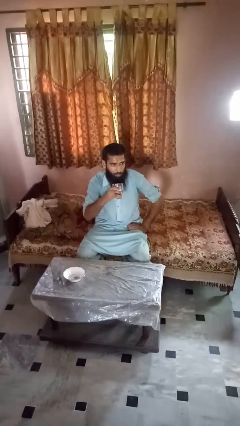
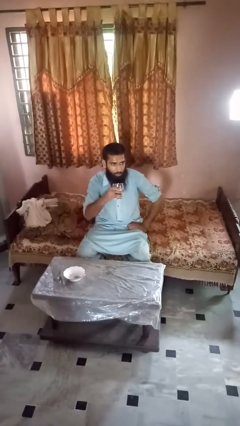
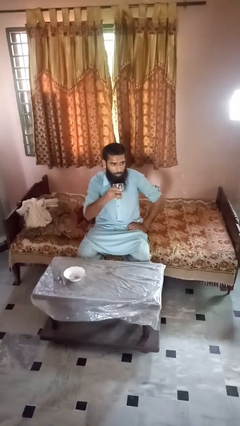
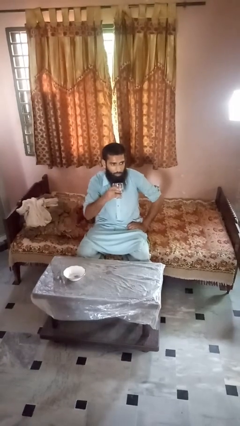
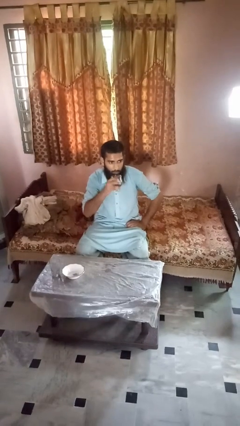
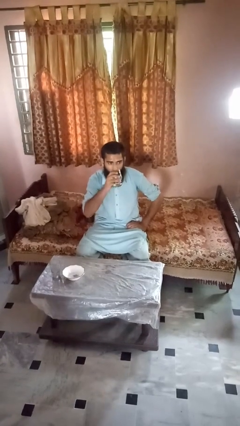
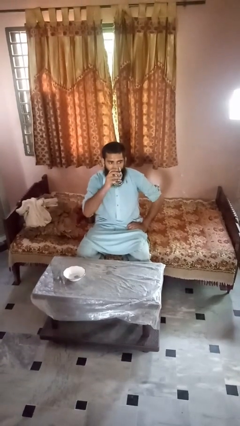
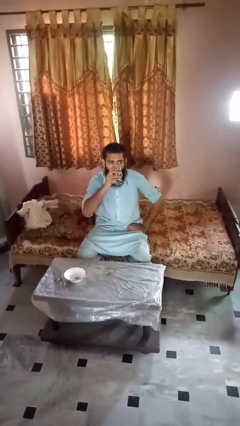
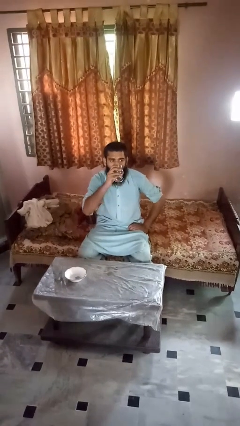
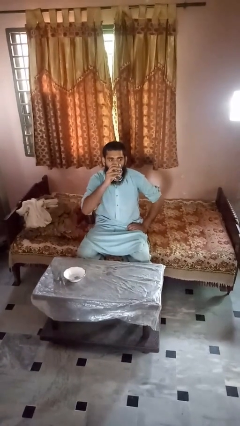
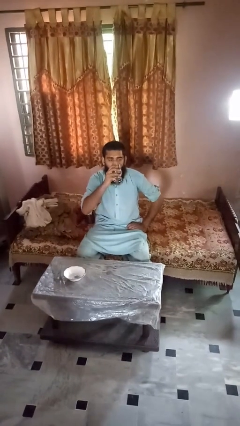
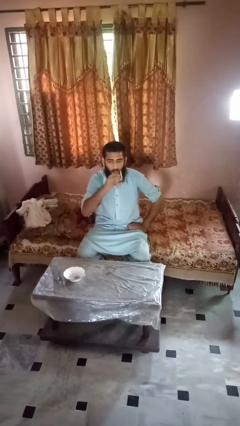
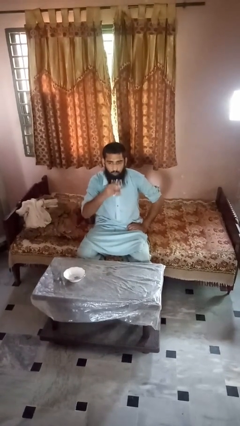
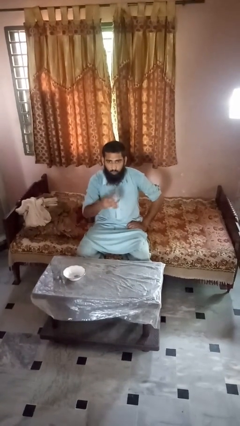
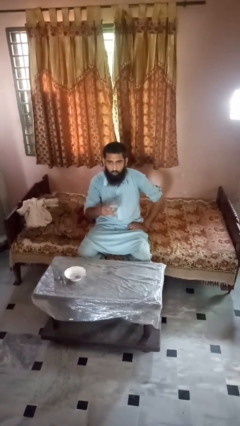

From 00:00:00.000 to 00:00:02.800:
person drinks from shotglass

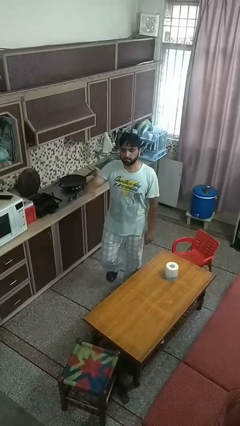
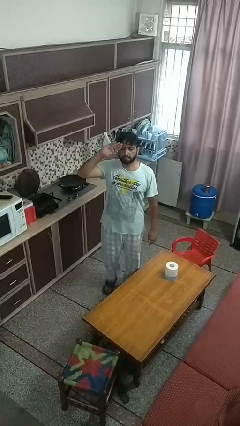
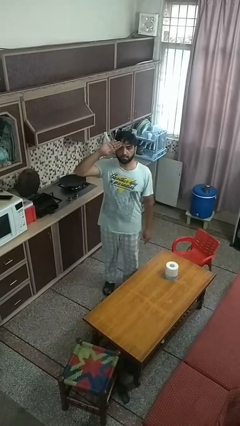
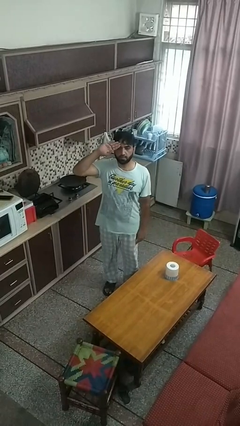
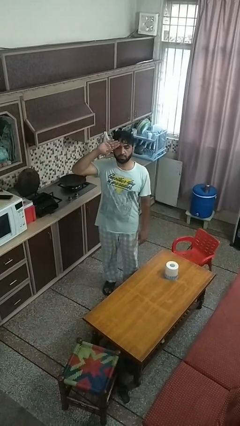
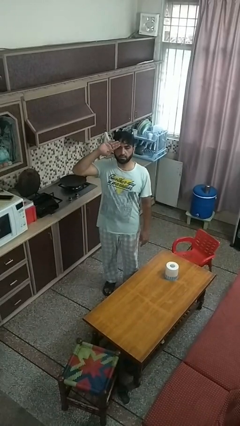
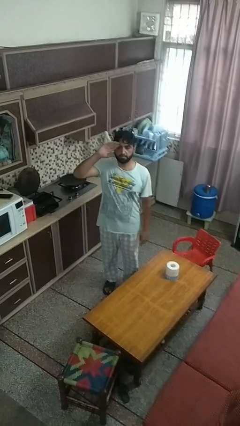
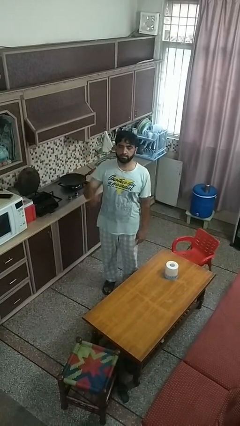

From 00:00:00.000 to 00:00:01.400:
person salutes

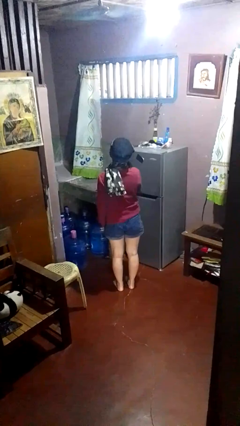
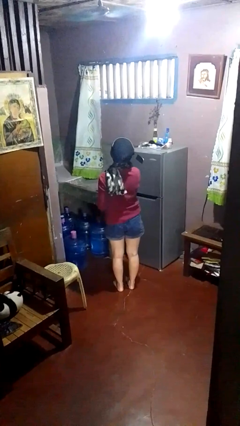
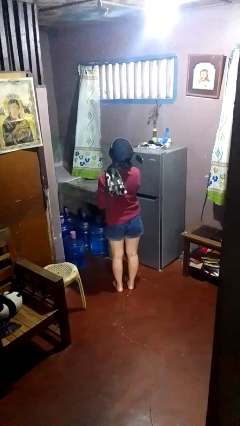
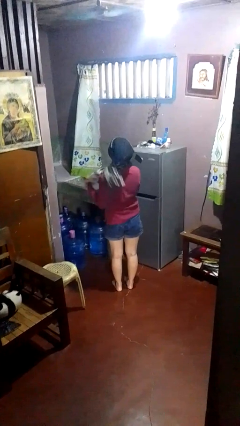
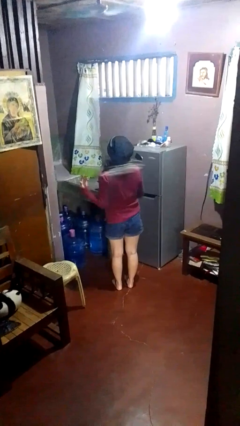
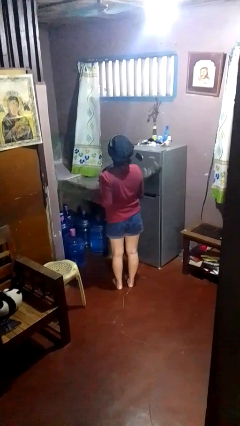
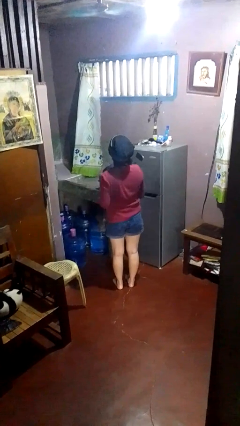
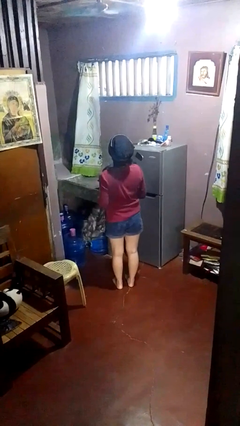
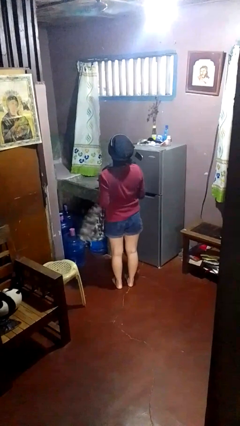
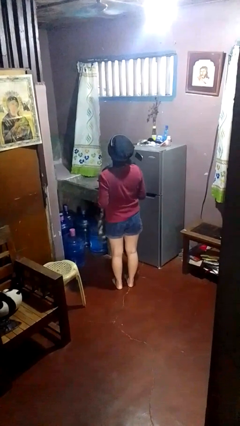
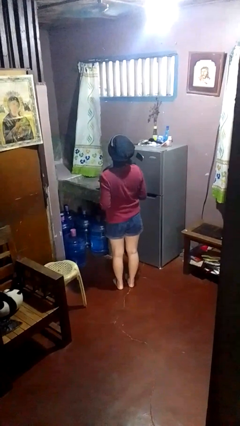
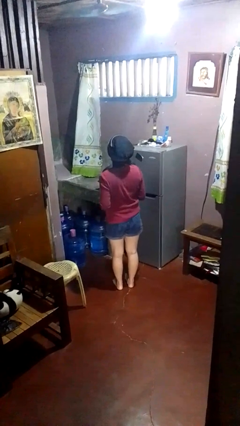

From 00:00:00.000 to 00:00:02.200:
person takes off scarf

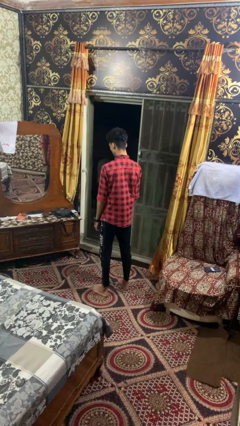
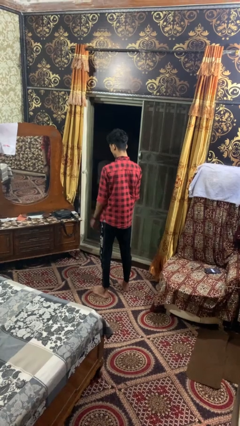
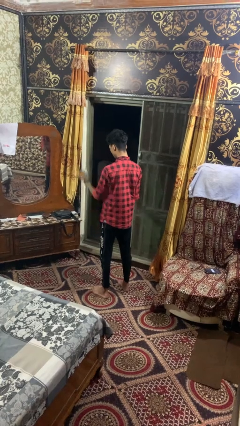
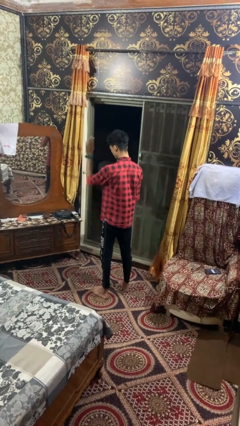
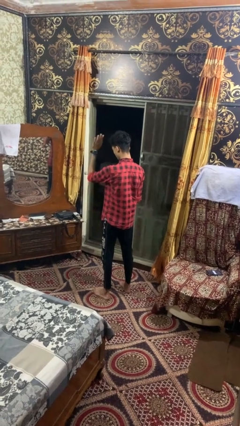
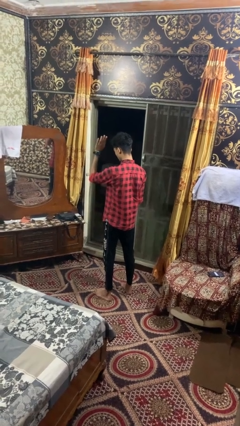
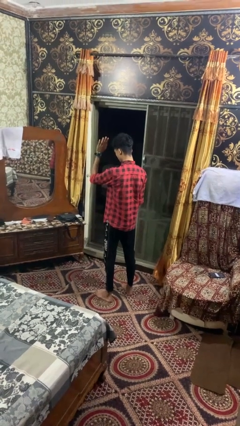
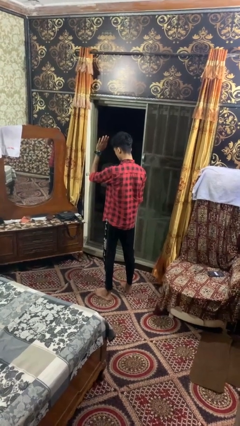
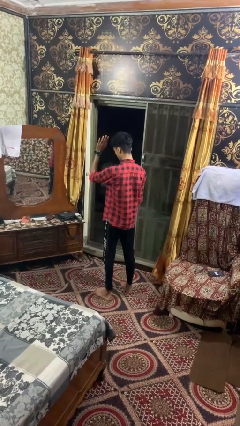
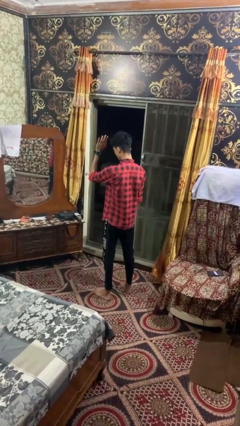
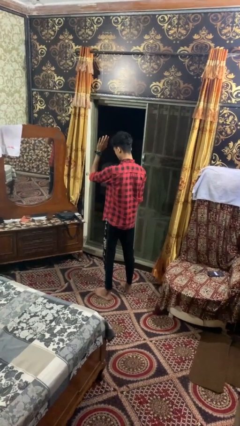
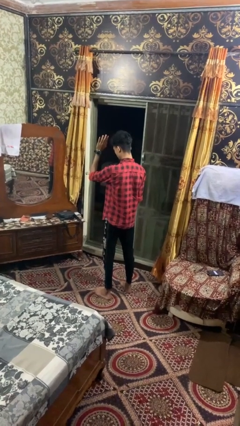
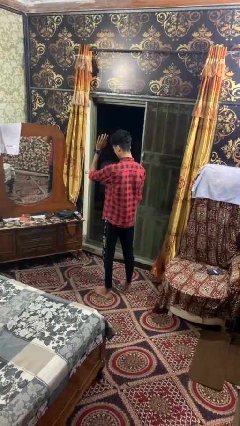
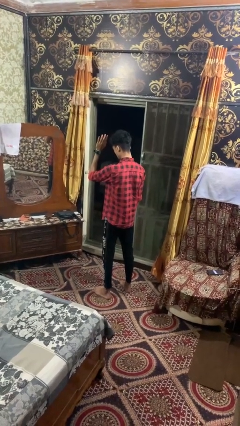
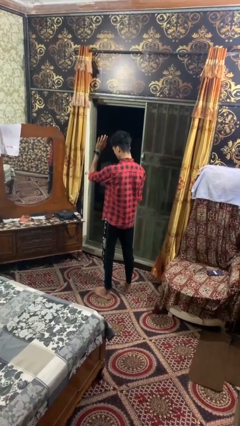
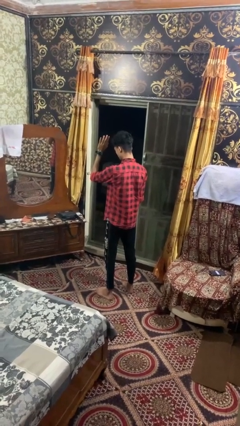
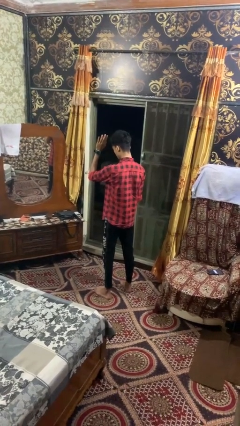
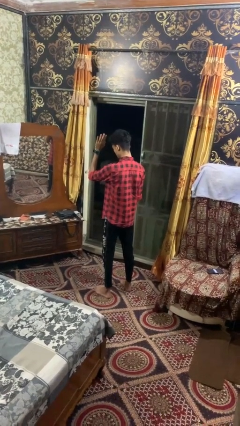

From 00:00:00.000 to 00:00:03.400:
person gestures raise hand

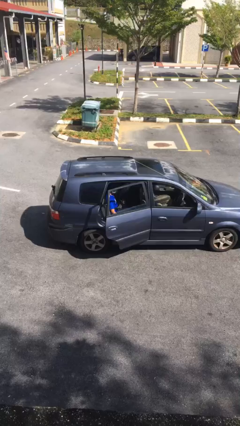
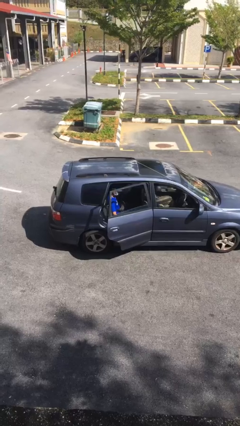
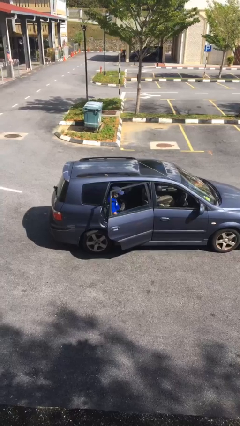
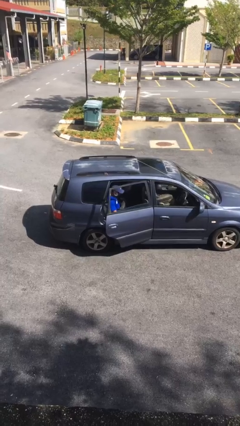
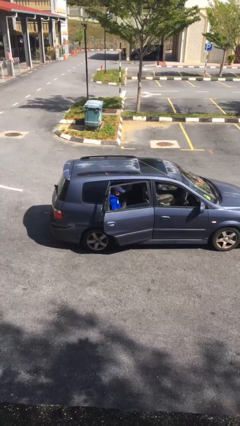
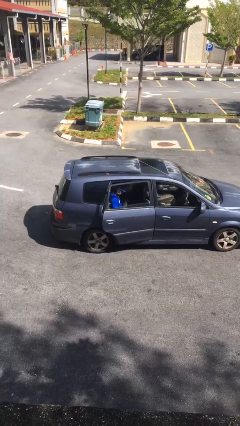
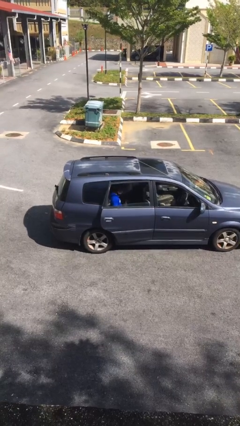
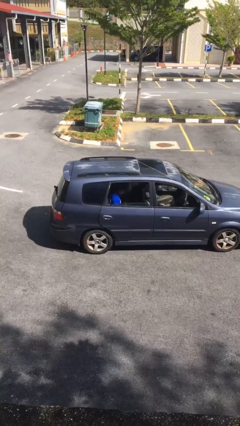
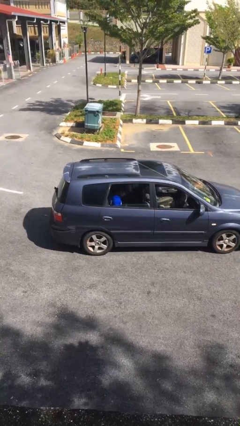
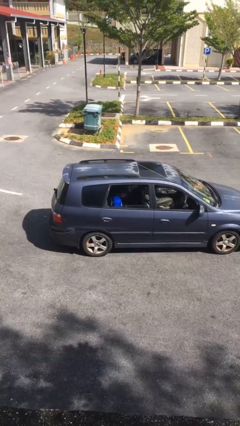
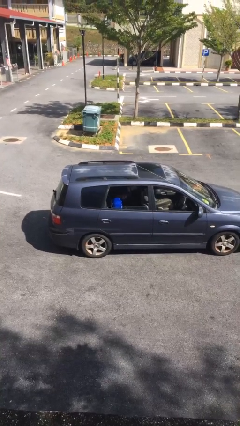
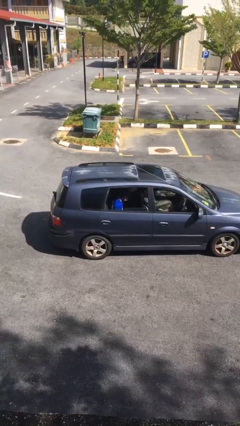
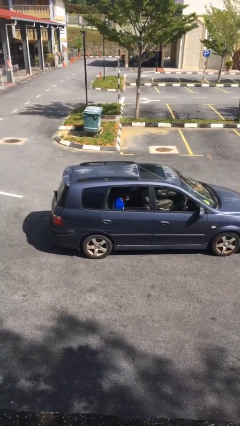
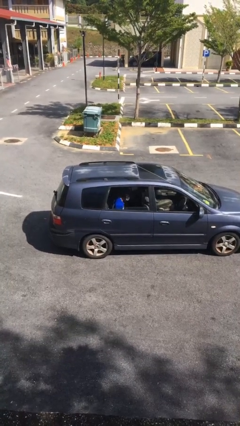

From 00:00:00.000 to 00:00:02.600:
person closes car door

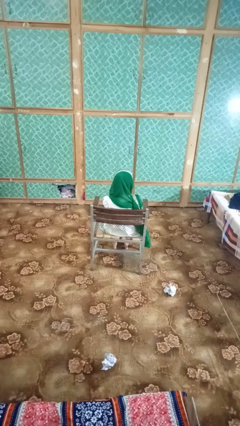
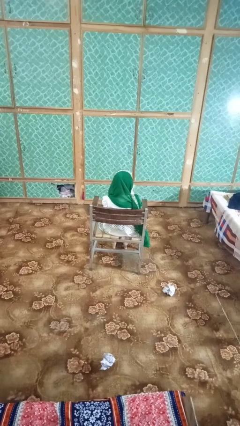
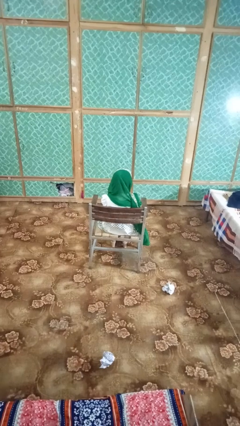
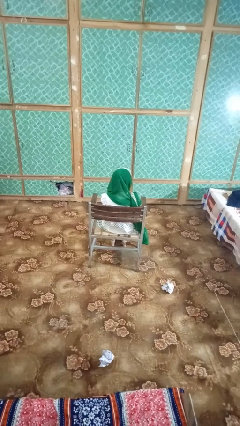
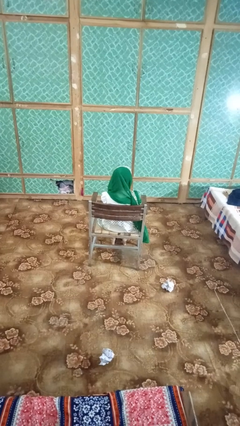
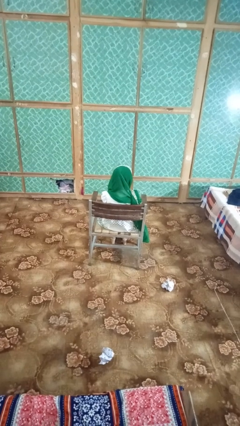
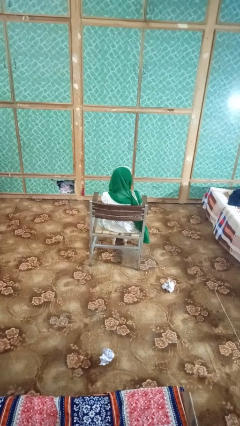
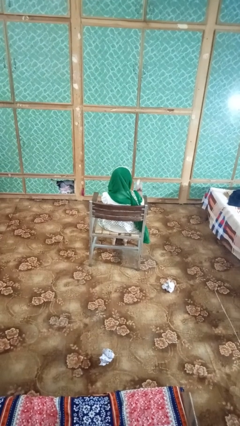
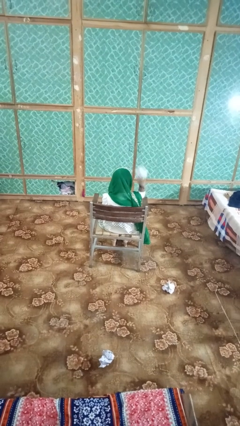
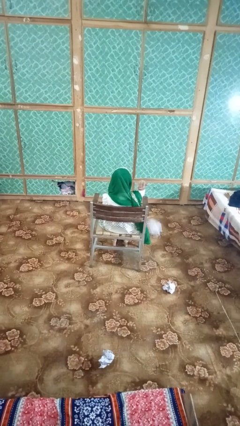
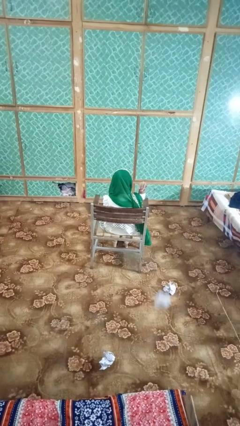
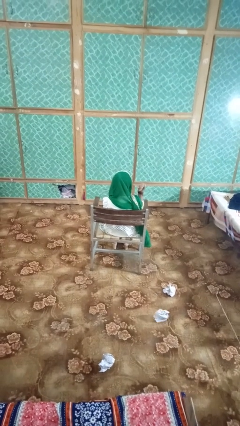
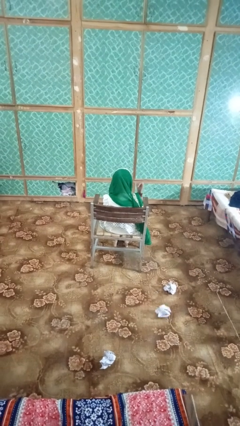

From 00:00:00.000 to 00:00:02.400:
person crumples paper

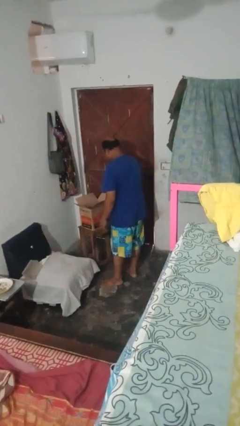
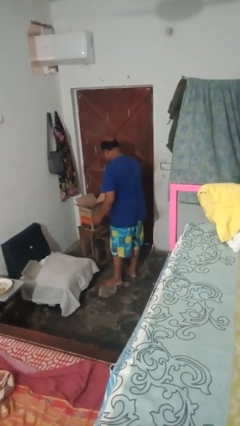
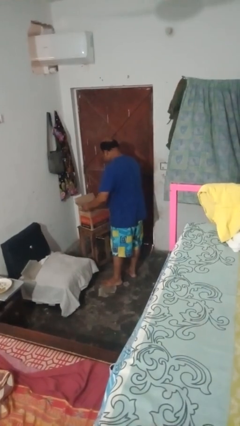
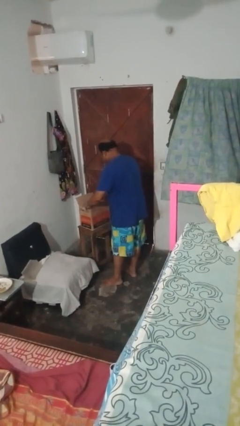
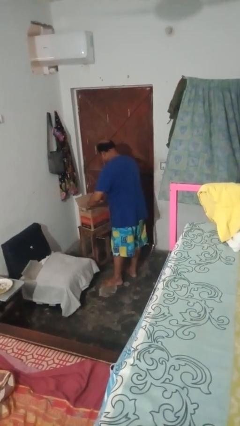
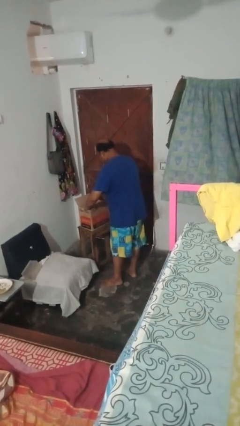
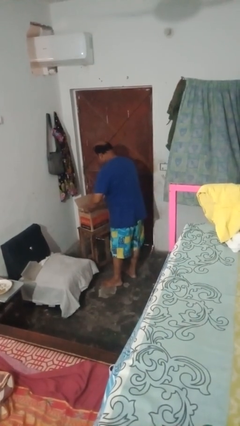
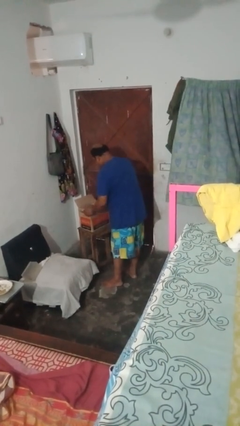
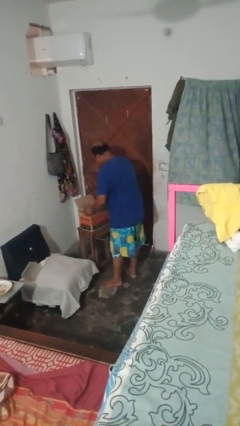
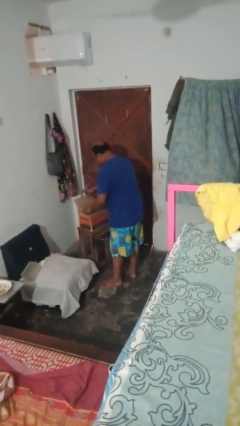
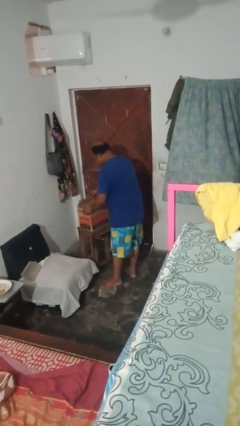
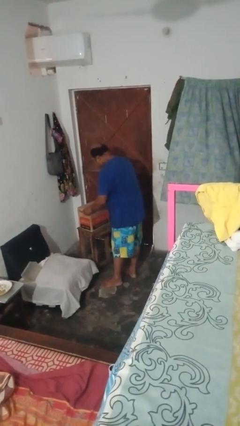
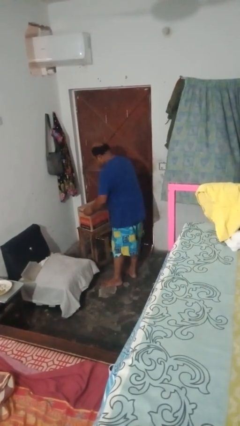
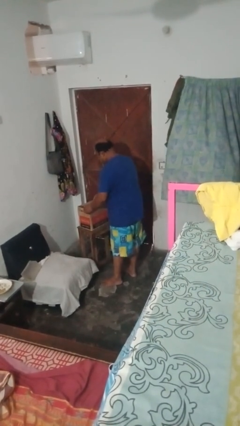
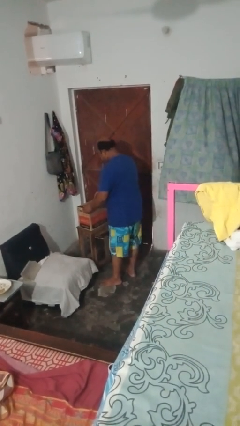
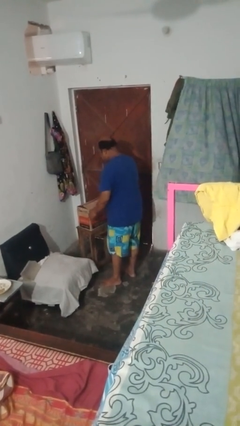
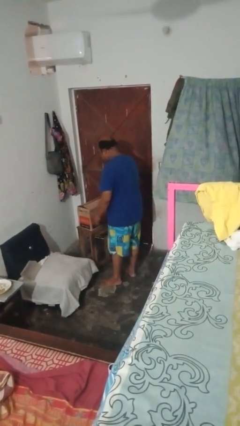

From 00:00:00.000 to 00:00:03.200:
person closes box
